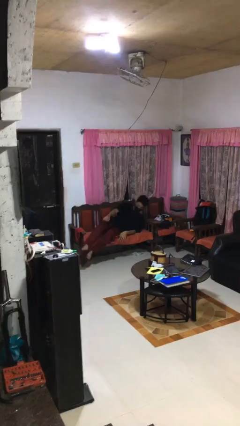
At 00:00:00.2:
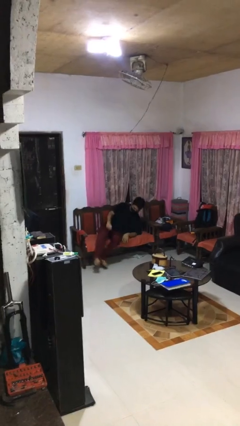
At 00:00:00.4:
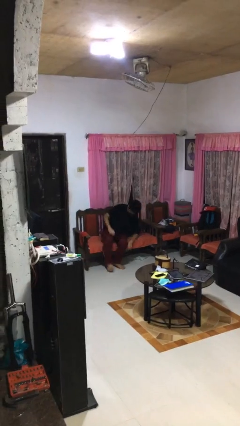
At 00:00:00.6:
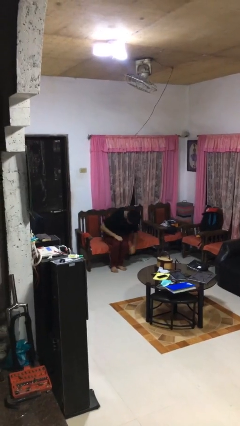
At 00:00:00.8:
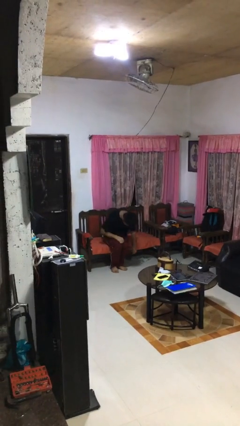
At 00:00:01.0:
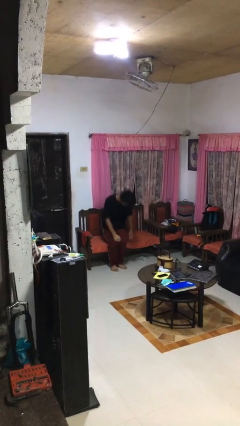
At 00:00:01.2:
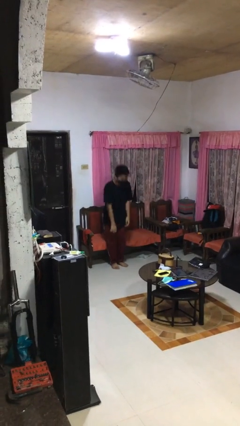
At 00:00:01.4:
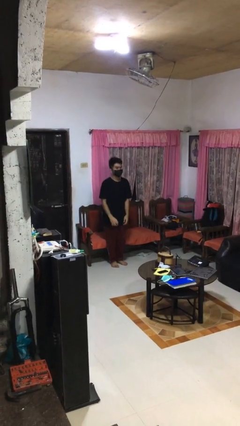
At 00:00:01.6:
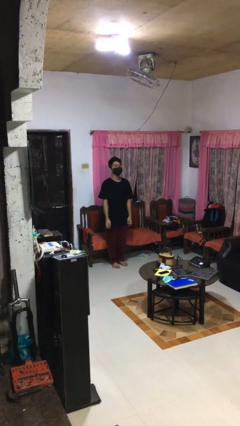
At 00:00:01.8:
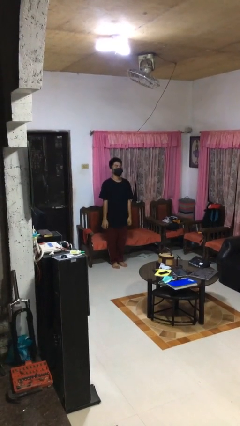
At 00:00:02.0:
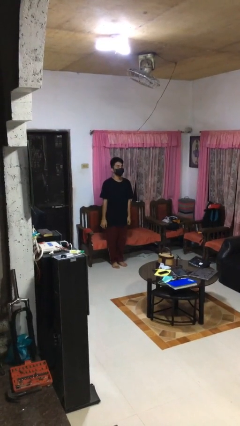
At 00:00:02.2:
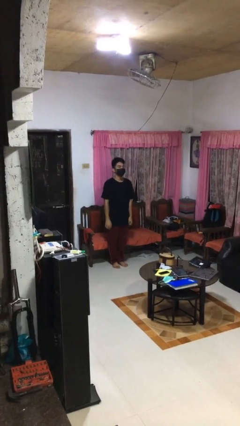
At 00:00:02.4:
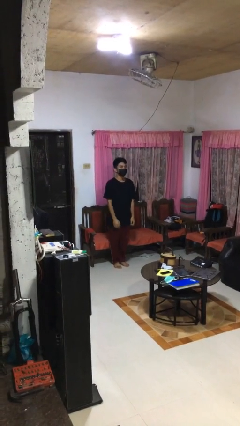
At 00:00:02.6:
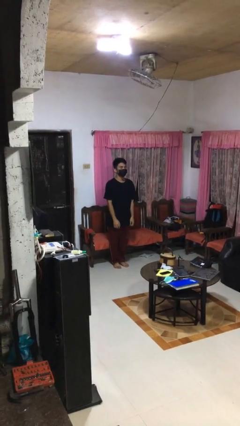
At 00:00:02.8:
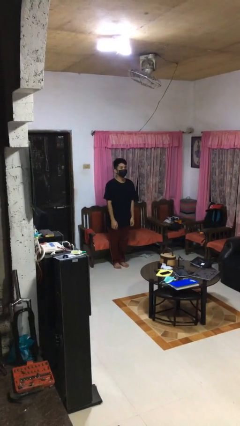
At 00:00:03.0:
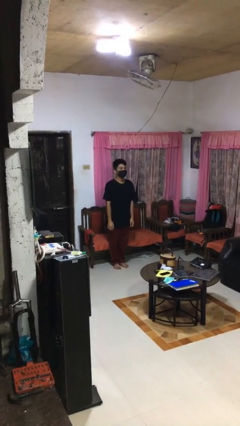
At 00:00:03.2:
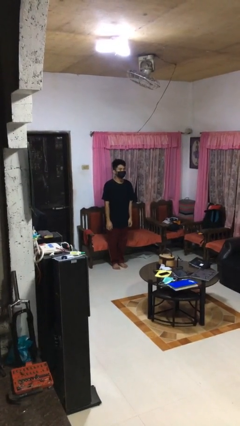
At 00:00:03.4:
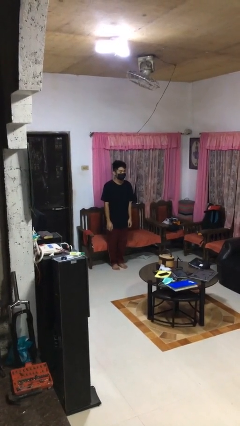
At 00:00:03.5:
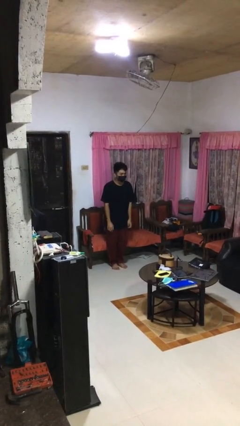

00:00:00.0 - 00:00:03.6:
person stands up

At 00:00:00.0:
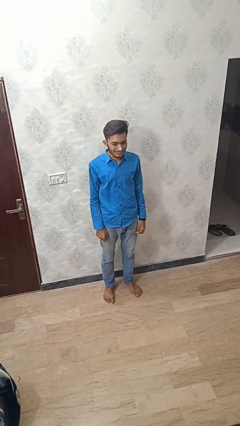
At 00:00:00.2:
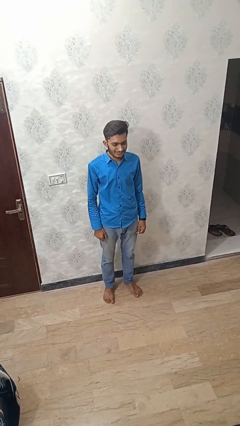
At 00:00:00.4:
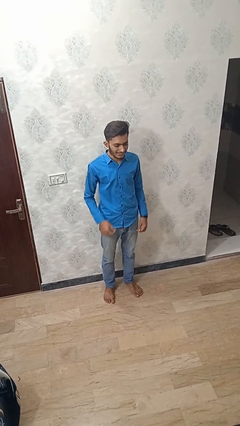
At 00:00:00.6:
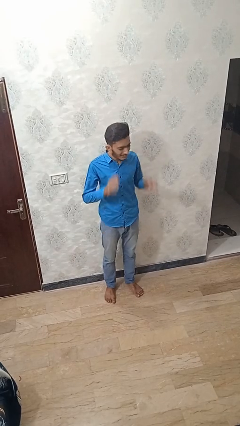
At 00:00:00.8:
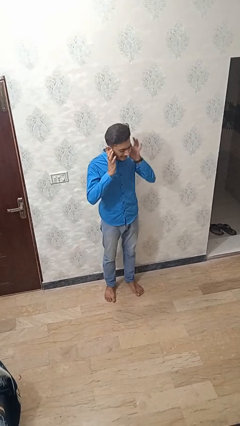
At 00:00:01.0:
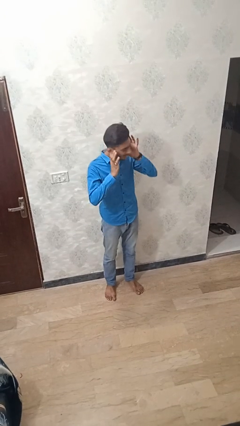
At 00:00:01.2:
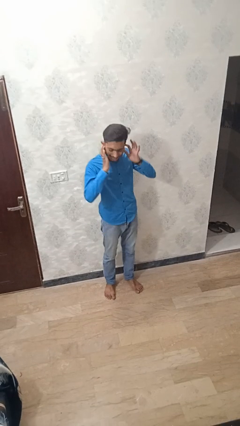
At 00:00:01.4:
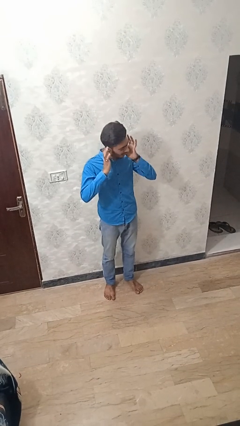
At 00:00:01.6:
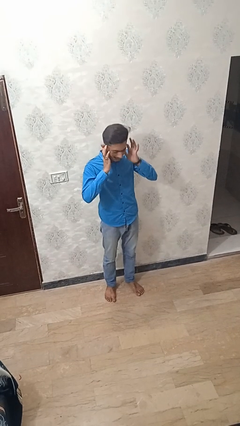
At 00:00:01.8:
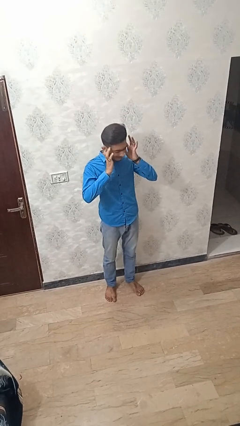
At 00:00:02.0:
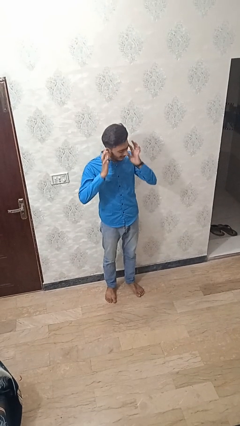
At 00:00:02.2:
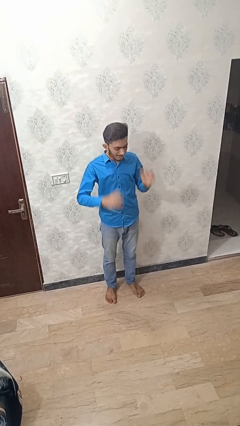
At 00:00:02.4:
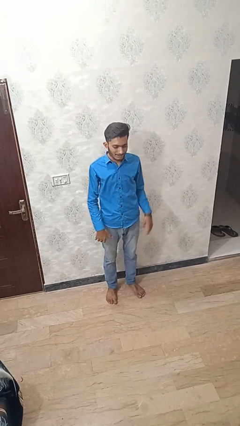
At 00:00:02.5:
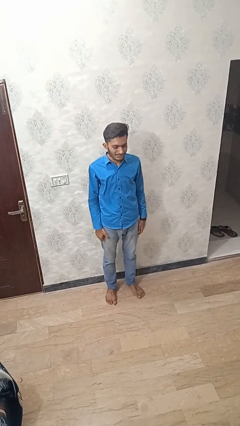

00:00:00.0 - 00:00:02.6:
person puts fingers in ear

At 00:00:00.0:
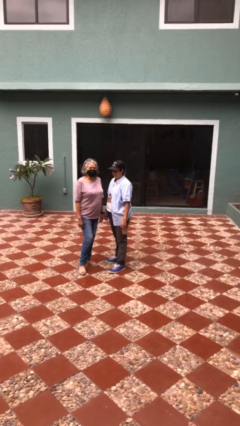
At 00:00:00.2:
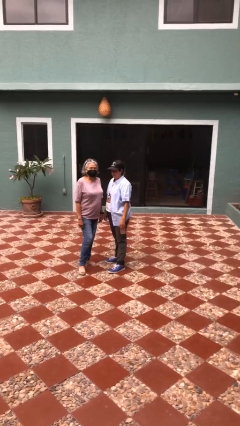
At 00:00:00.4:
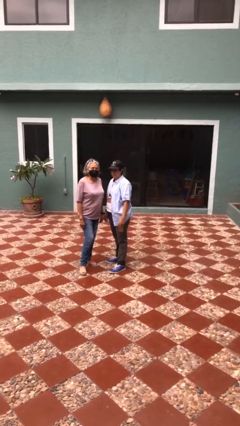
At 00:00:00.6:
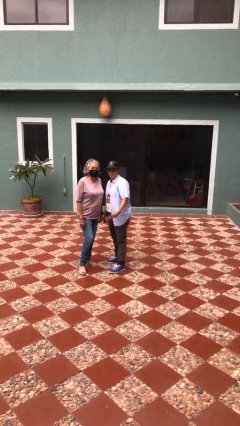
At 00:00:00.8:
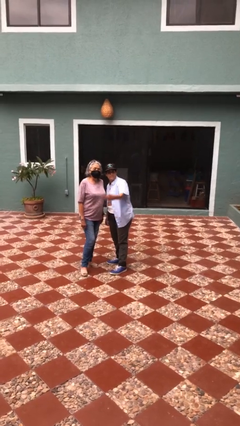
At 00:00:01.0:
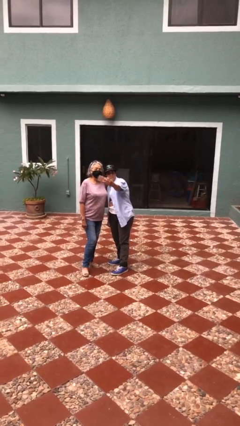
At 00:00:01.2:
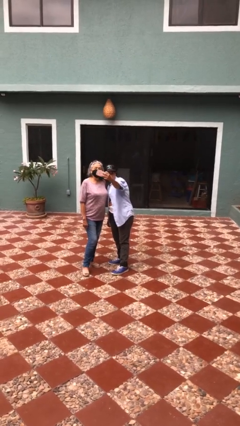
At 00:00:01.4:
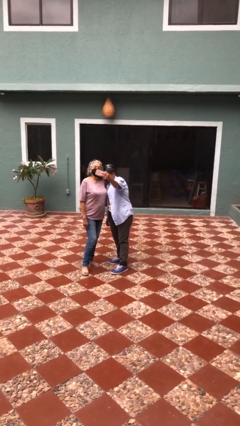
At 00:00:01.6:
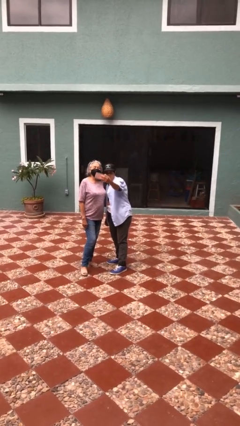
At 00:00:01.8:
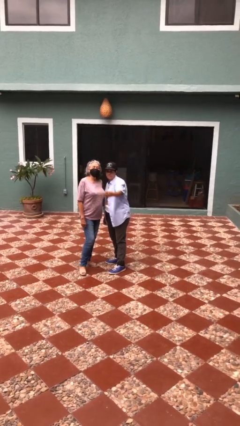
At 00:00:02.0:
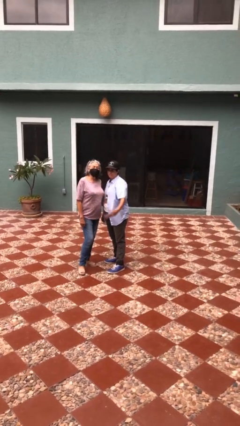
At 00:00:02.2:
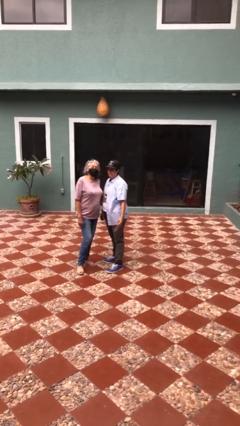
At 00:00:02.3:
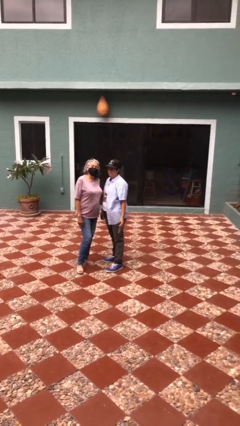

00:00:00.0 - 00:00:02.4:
person takes selfie with person

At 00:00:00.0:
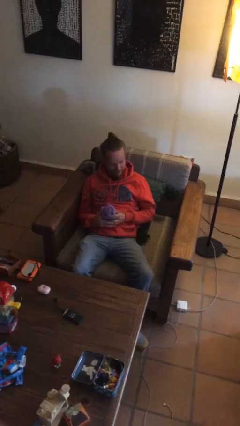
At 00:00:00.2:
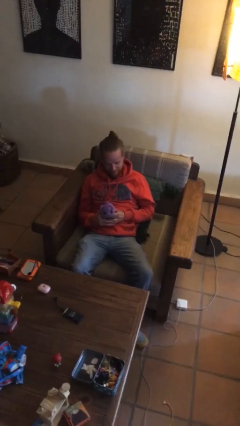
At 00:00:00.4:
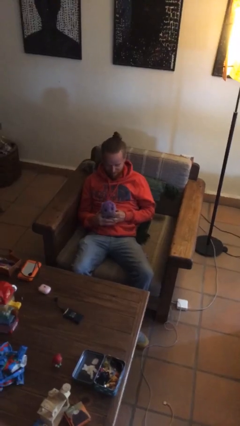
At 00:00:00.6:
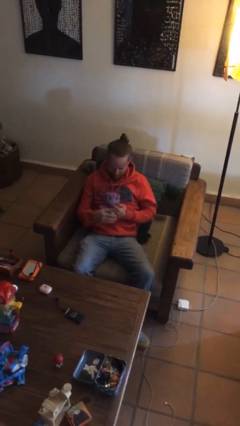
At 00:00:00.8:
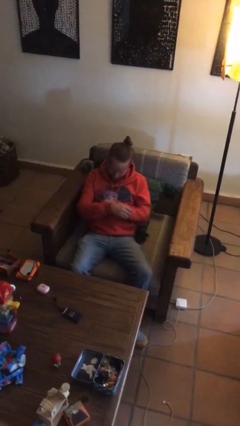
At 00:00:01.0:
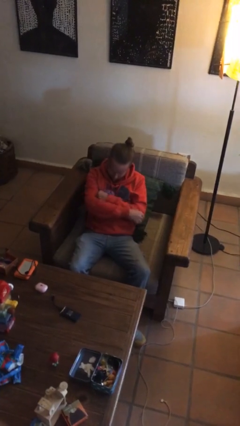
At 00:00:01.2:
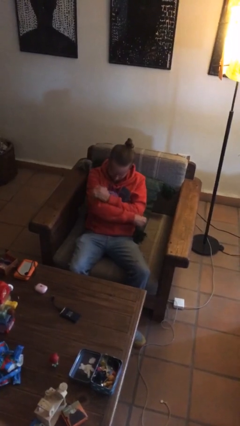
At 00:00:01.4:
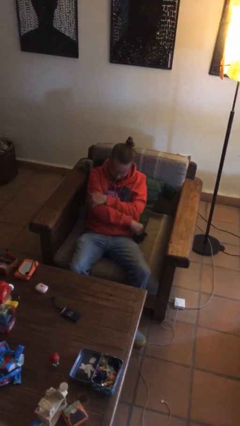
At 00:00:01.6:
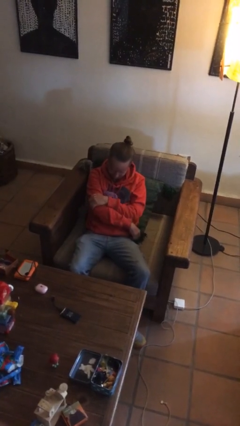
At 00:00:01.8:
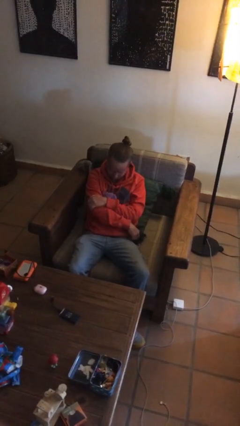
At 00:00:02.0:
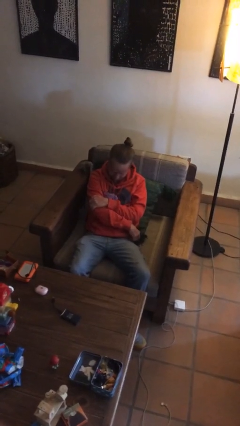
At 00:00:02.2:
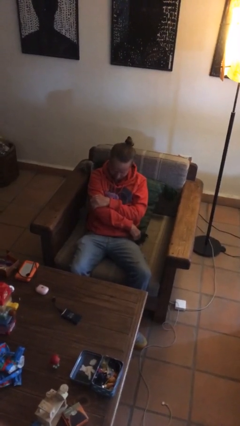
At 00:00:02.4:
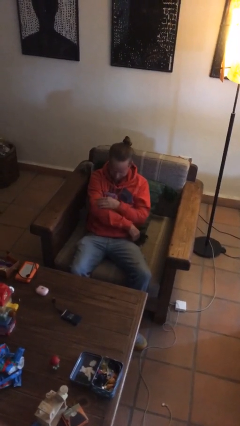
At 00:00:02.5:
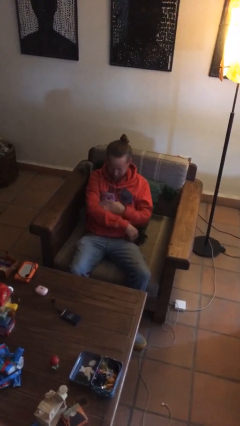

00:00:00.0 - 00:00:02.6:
person hugs stuffed animal

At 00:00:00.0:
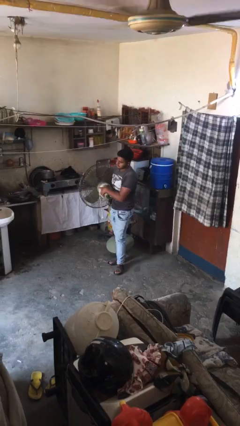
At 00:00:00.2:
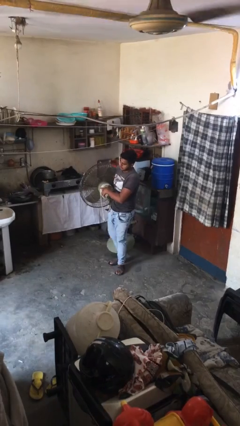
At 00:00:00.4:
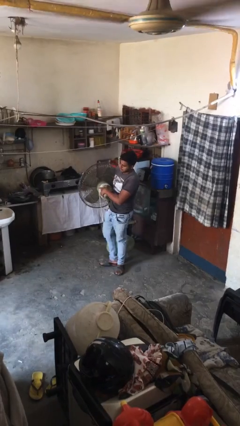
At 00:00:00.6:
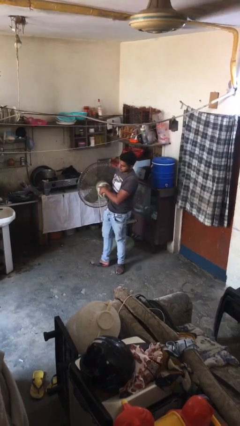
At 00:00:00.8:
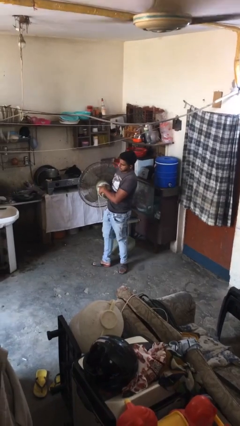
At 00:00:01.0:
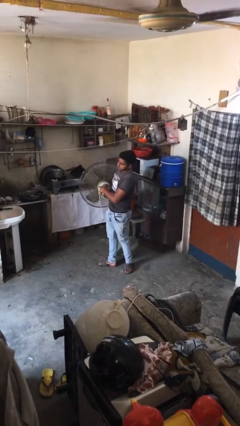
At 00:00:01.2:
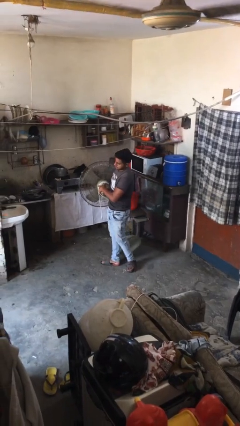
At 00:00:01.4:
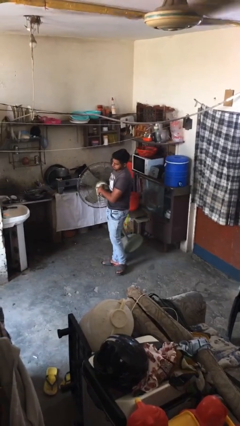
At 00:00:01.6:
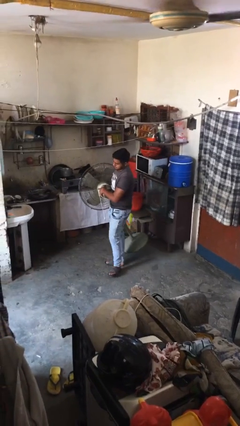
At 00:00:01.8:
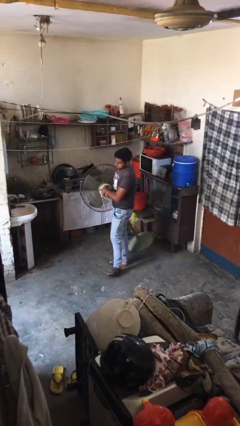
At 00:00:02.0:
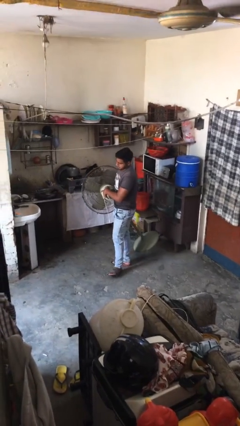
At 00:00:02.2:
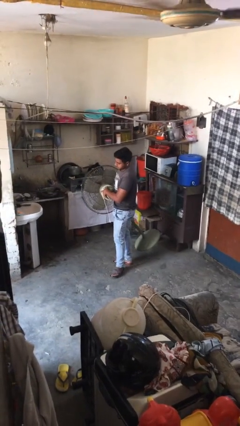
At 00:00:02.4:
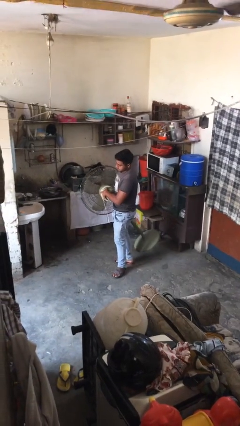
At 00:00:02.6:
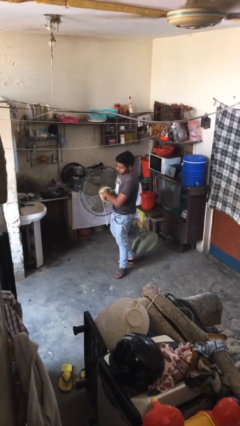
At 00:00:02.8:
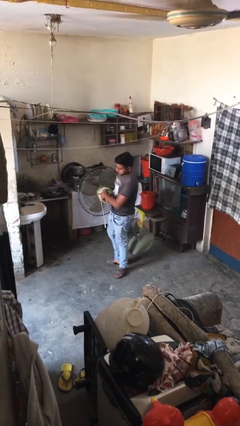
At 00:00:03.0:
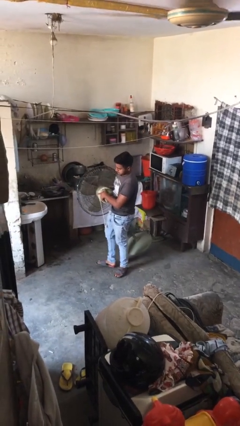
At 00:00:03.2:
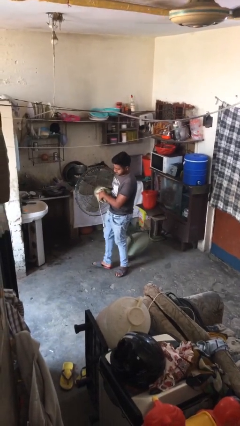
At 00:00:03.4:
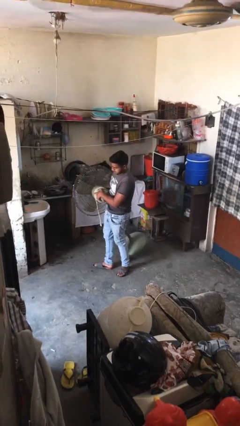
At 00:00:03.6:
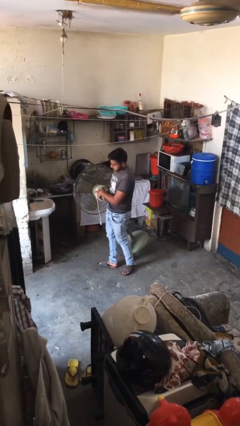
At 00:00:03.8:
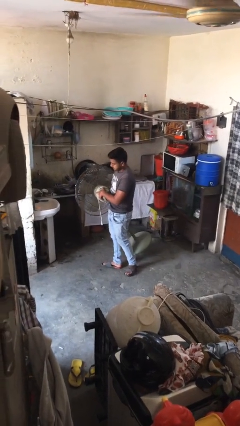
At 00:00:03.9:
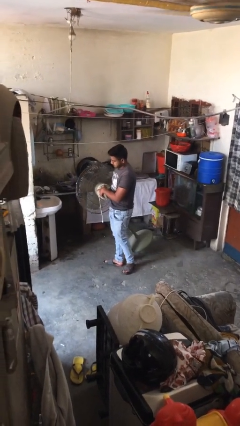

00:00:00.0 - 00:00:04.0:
person carries heavy object

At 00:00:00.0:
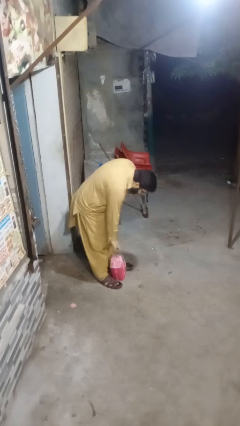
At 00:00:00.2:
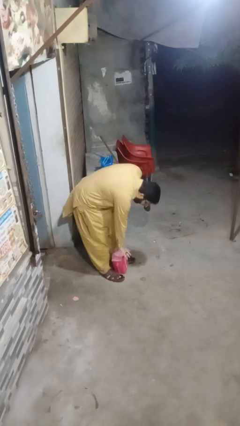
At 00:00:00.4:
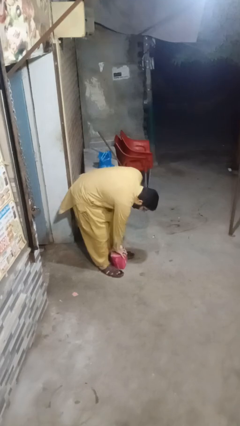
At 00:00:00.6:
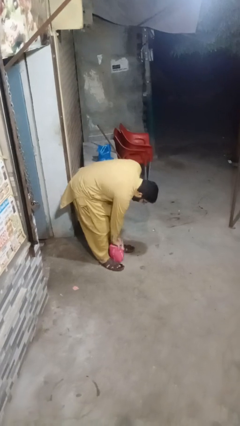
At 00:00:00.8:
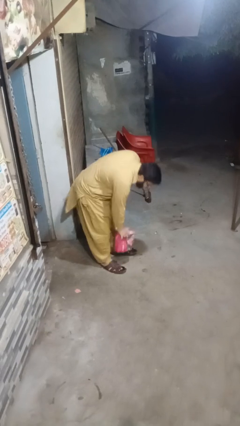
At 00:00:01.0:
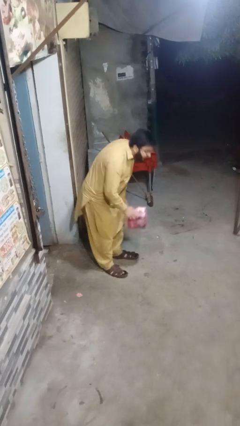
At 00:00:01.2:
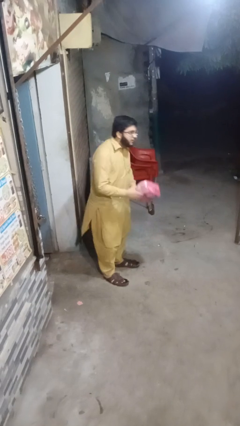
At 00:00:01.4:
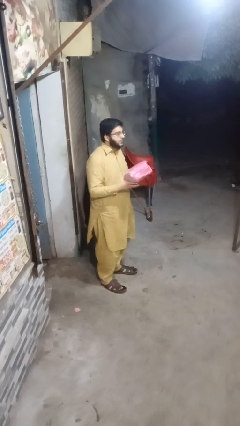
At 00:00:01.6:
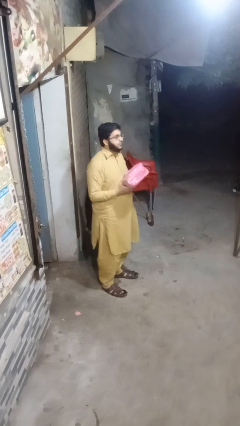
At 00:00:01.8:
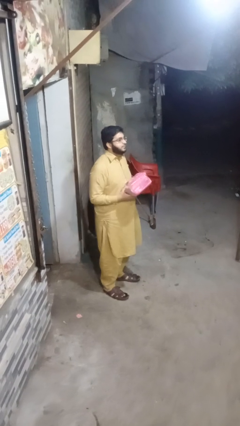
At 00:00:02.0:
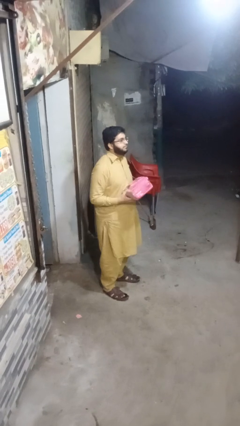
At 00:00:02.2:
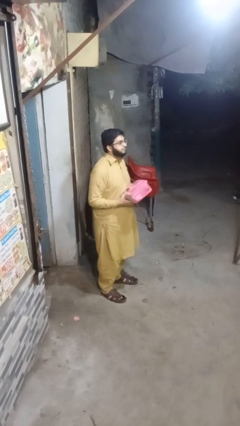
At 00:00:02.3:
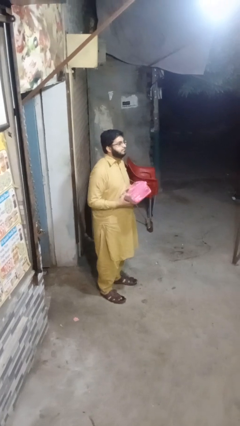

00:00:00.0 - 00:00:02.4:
person picks up object from floor
